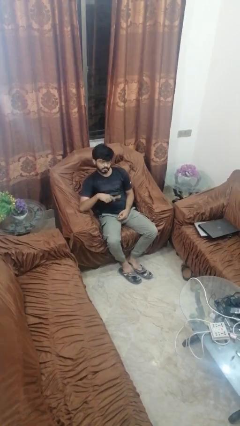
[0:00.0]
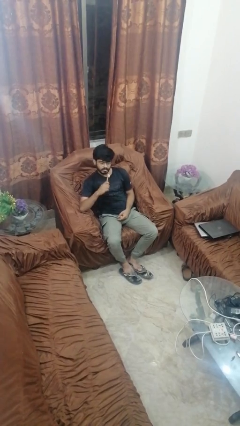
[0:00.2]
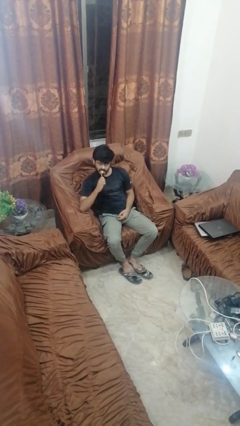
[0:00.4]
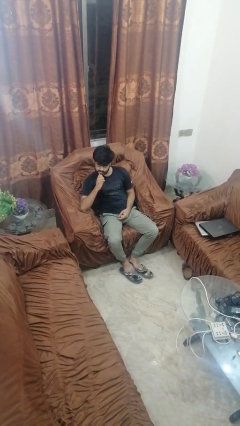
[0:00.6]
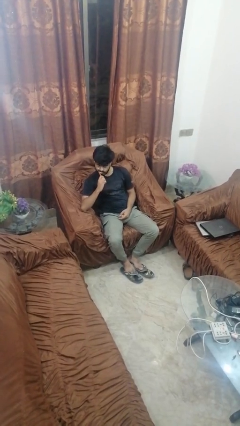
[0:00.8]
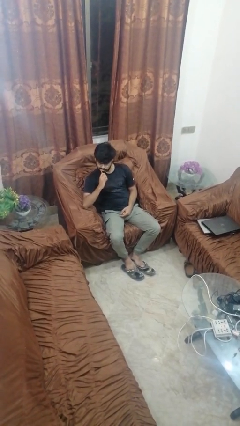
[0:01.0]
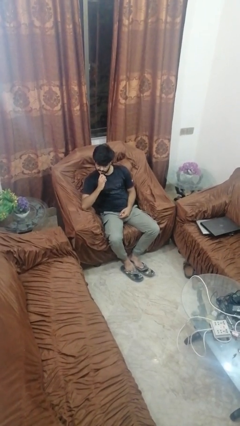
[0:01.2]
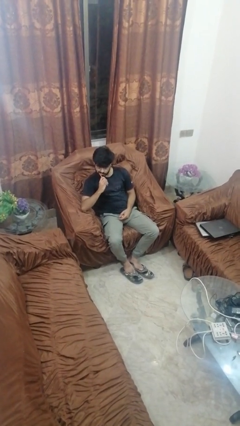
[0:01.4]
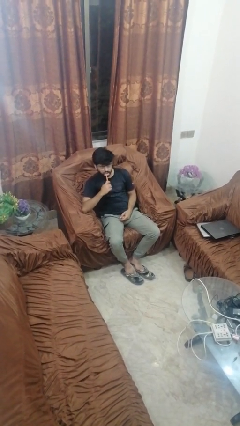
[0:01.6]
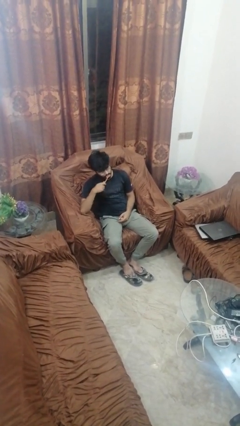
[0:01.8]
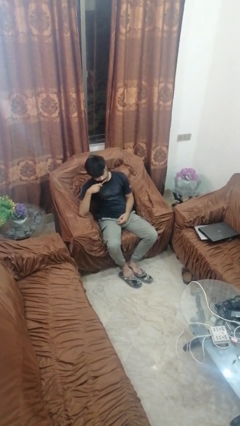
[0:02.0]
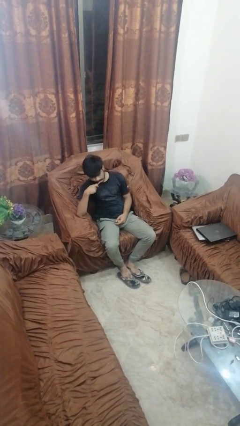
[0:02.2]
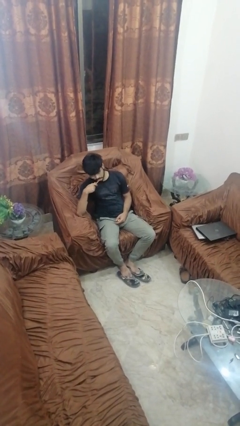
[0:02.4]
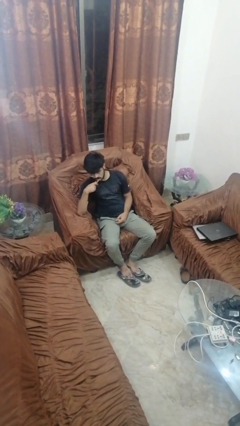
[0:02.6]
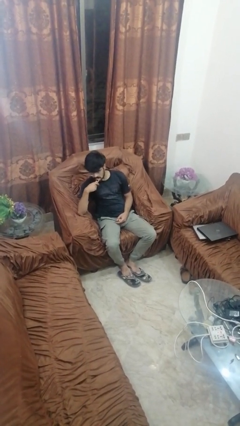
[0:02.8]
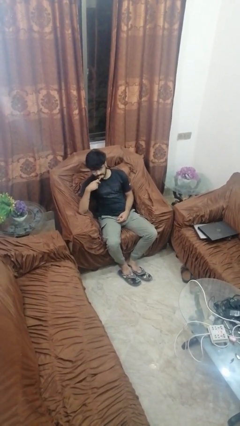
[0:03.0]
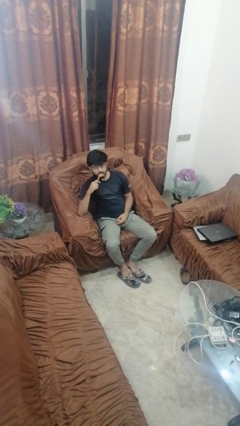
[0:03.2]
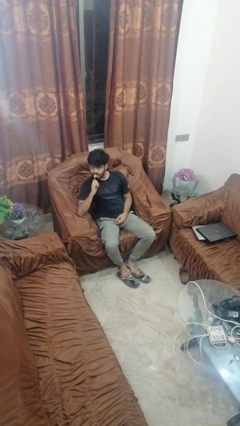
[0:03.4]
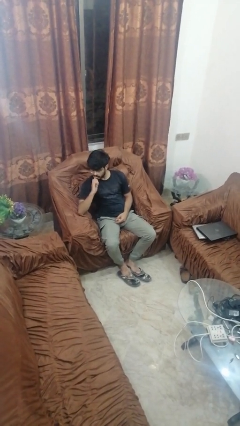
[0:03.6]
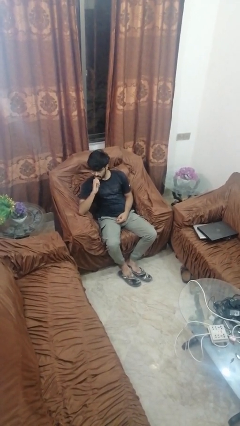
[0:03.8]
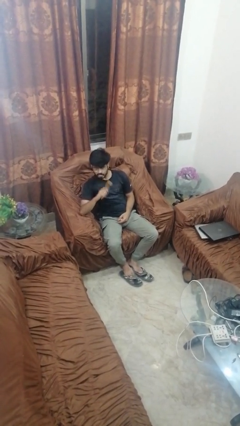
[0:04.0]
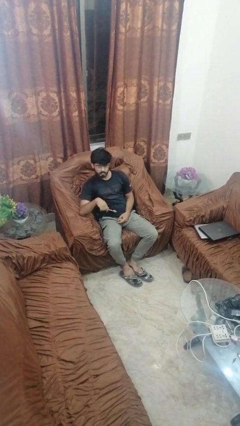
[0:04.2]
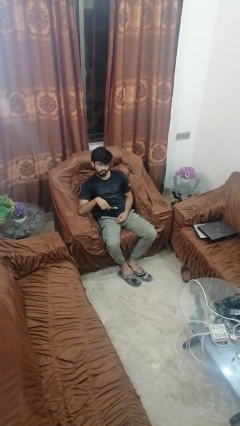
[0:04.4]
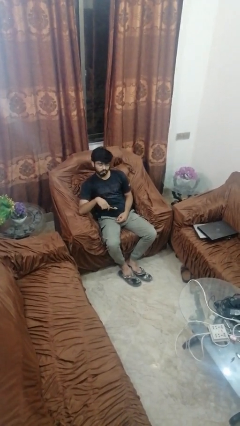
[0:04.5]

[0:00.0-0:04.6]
person brushes teeth

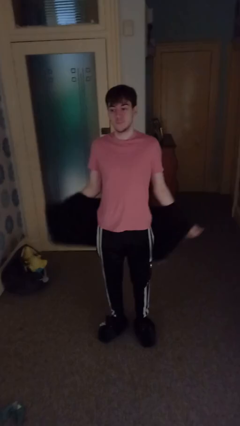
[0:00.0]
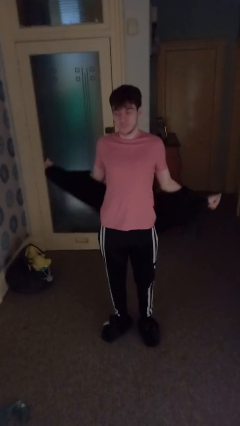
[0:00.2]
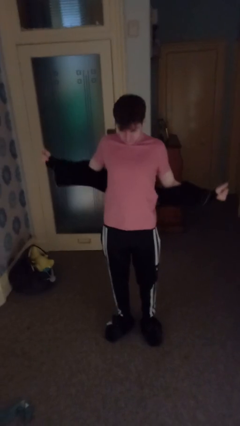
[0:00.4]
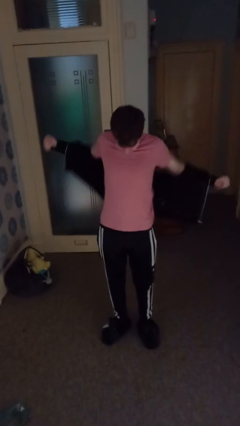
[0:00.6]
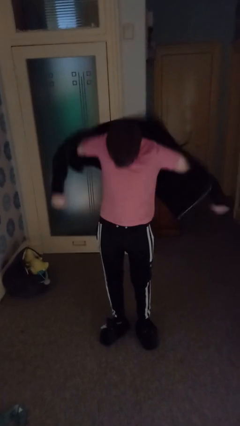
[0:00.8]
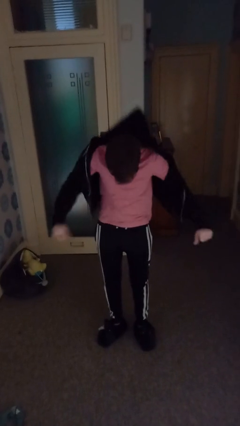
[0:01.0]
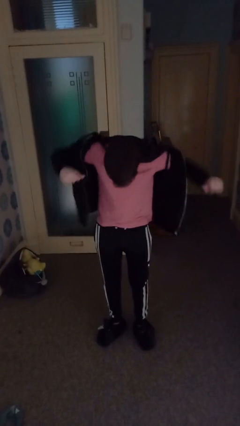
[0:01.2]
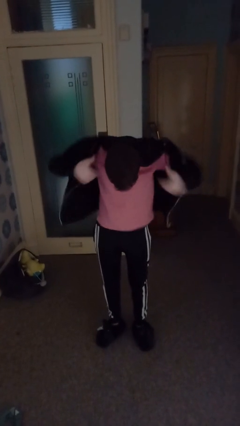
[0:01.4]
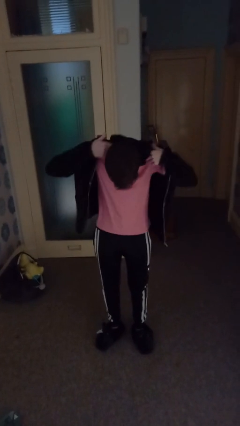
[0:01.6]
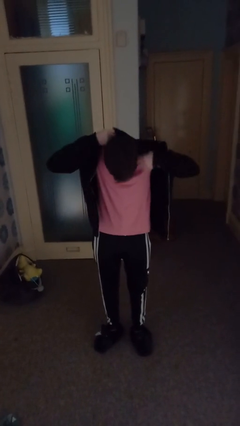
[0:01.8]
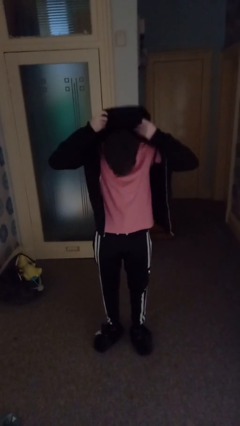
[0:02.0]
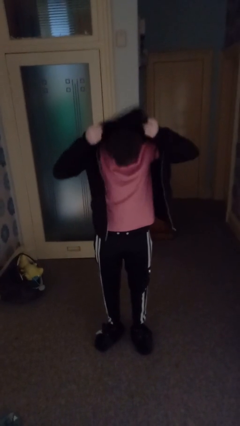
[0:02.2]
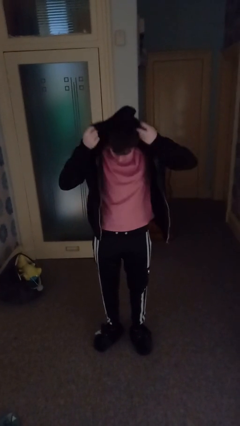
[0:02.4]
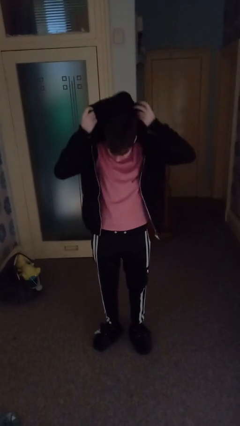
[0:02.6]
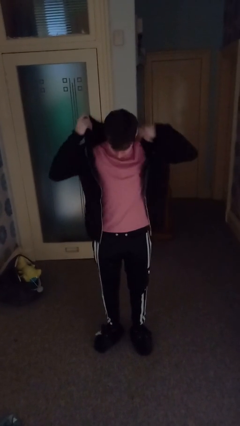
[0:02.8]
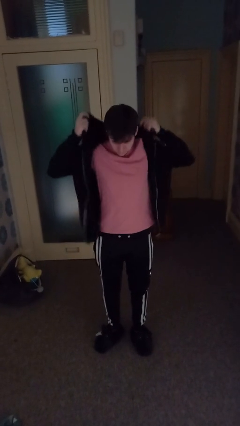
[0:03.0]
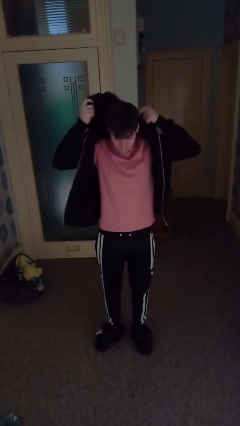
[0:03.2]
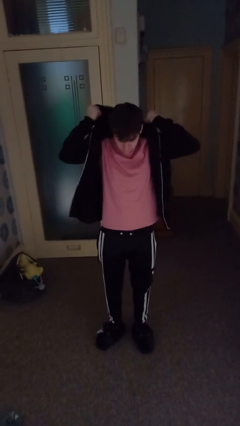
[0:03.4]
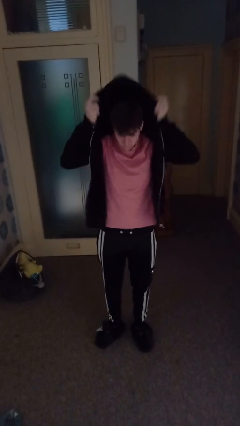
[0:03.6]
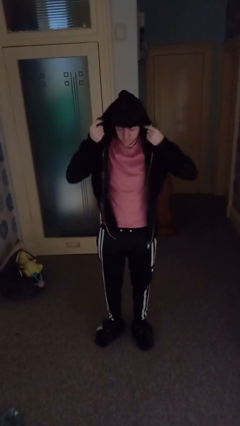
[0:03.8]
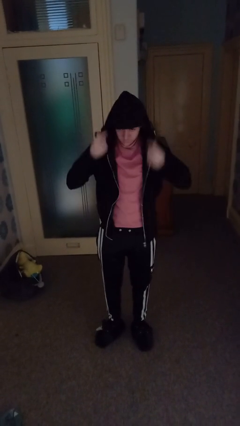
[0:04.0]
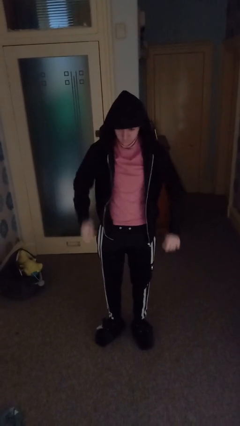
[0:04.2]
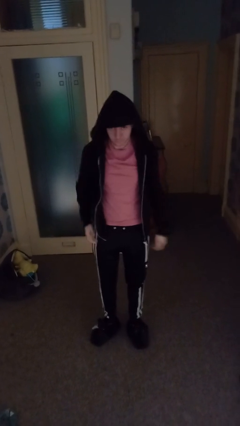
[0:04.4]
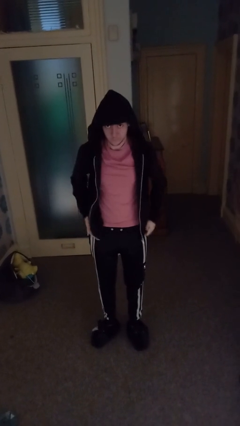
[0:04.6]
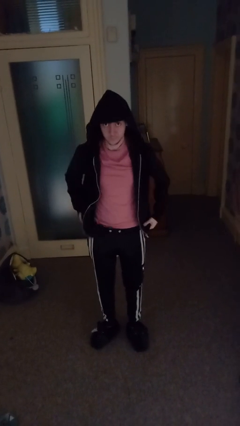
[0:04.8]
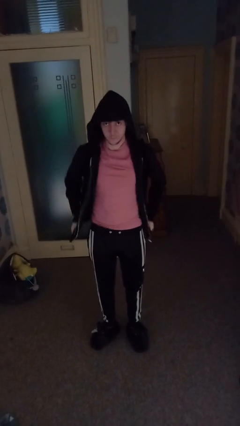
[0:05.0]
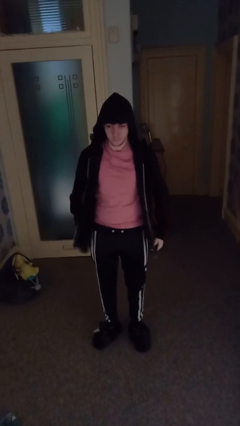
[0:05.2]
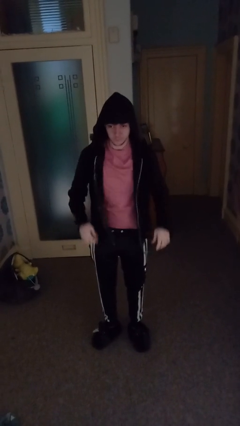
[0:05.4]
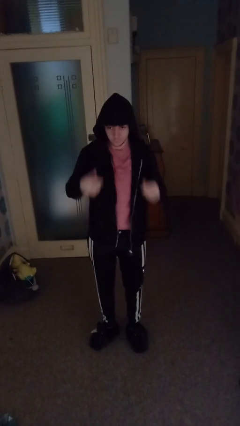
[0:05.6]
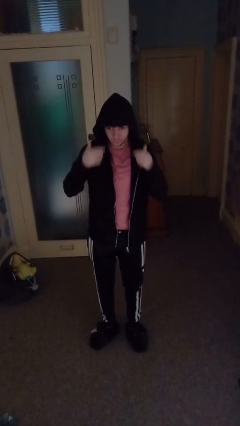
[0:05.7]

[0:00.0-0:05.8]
person puts on hoodie

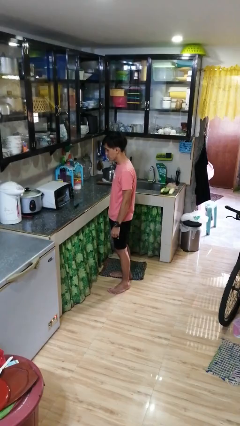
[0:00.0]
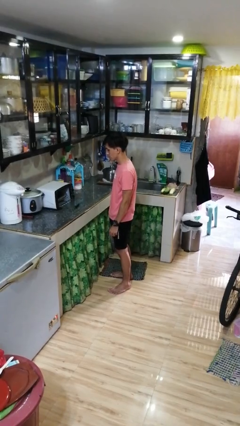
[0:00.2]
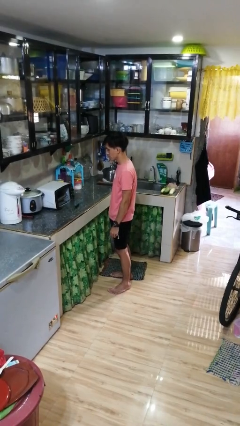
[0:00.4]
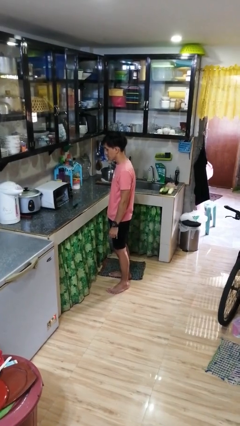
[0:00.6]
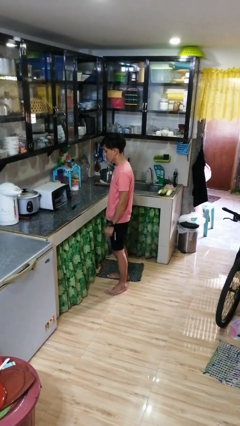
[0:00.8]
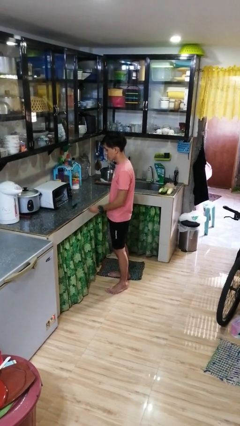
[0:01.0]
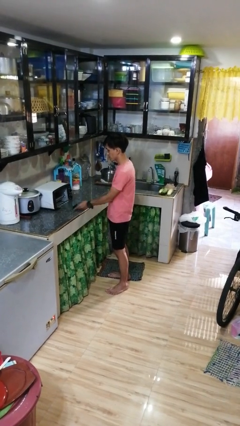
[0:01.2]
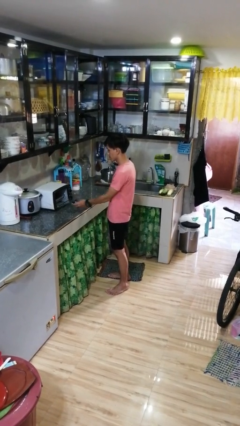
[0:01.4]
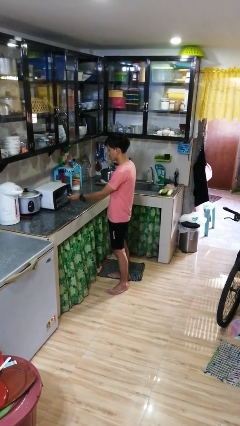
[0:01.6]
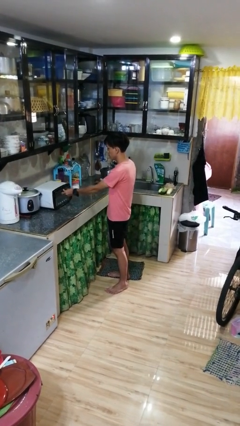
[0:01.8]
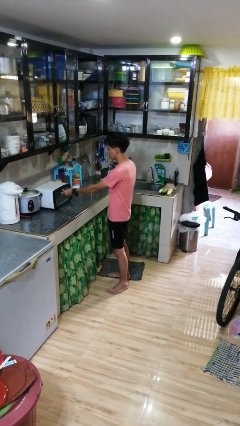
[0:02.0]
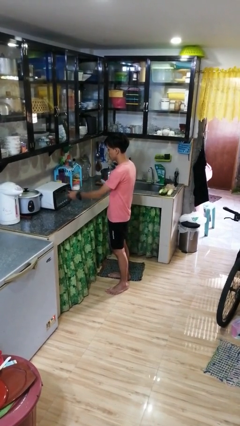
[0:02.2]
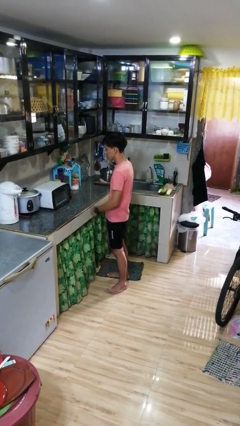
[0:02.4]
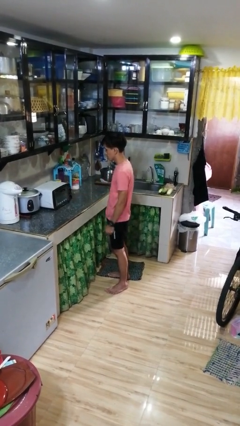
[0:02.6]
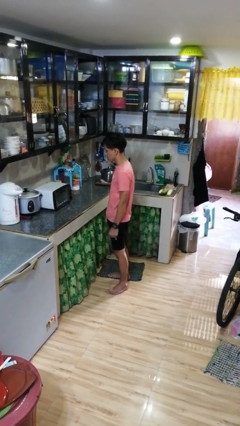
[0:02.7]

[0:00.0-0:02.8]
person closes microwave

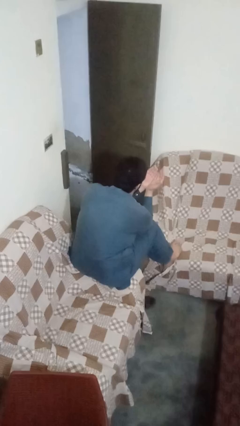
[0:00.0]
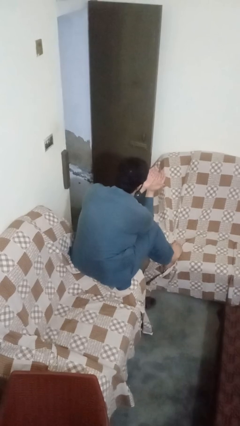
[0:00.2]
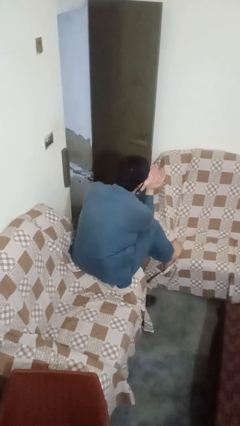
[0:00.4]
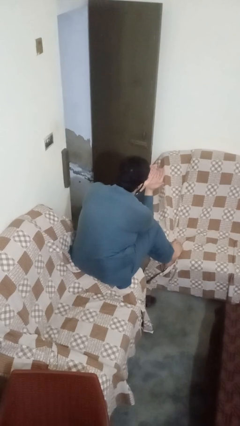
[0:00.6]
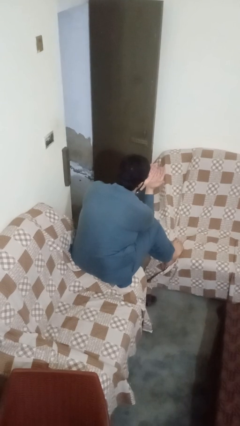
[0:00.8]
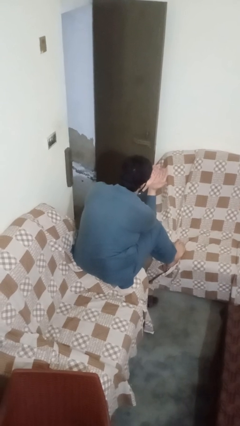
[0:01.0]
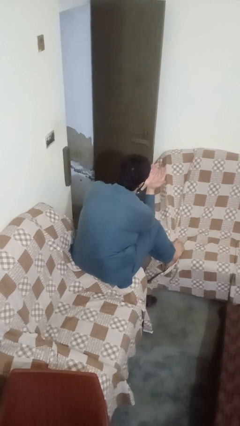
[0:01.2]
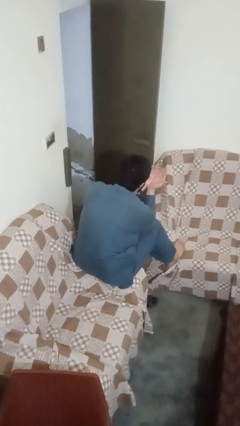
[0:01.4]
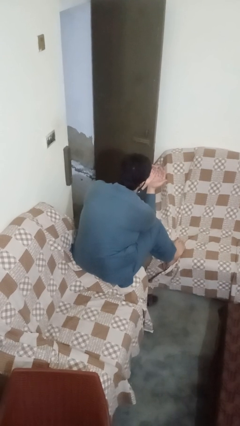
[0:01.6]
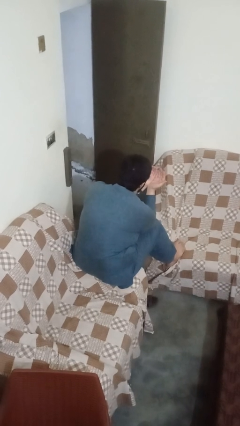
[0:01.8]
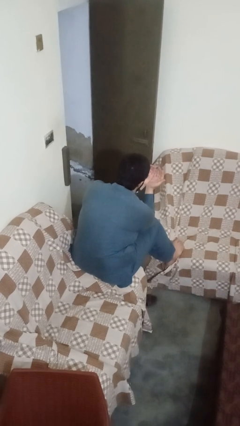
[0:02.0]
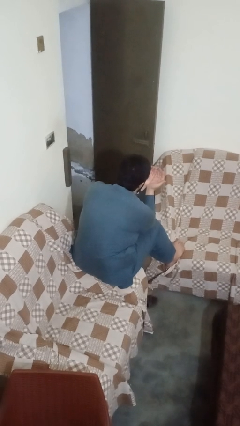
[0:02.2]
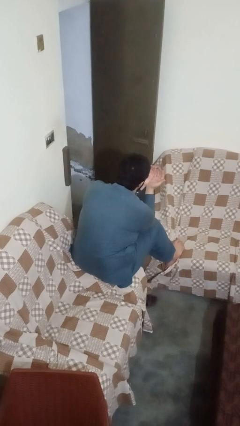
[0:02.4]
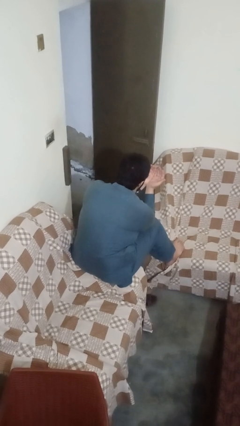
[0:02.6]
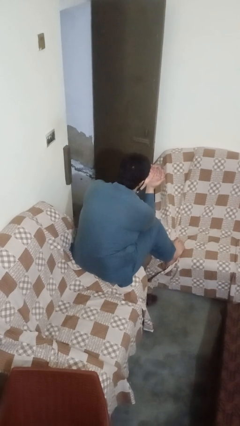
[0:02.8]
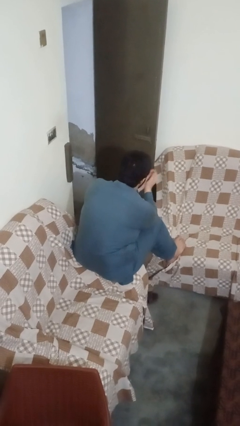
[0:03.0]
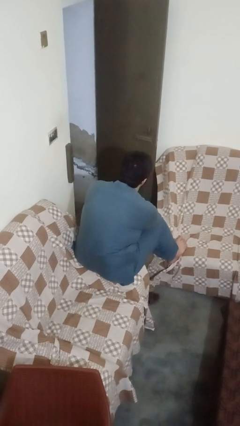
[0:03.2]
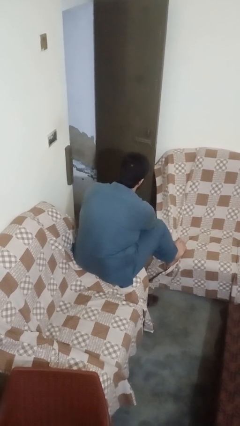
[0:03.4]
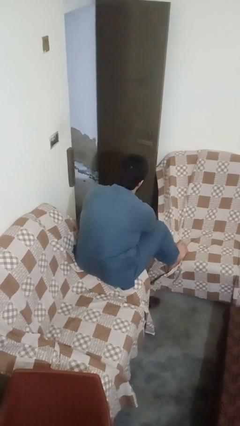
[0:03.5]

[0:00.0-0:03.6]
person prays

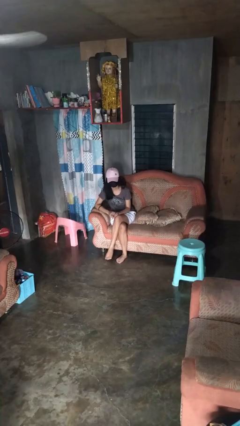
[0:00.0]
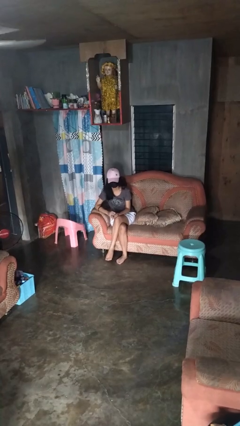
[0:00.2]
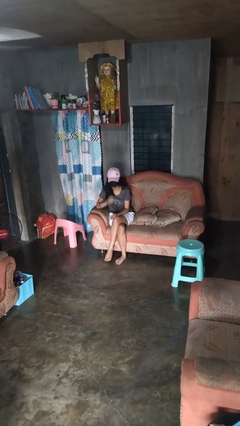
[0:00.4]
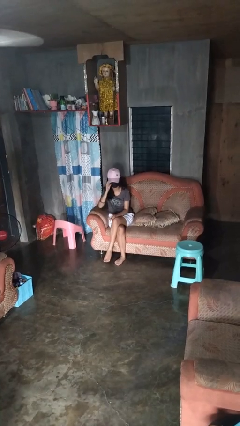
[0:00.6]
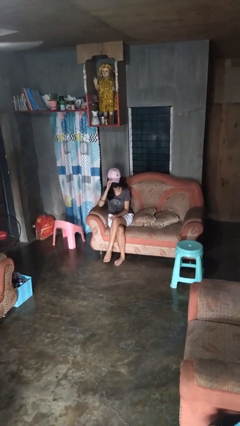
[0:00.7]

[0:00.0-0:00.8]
person takes off hat
